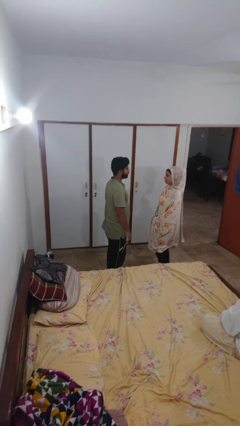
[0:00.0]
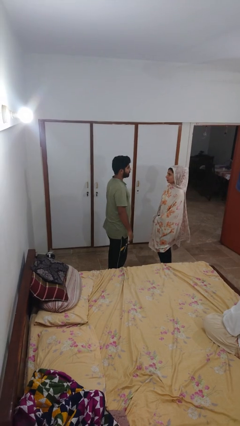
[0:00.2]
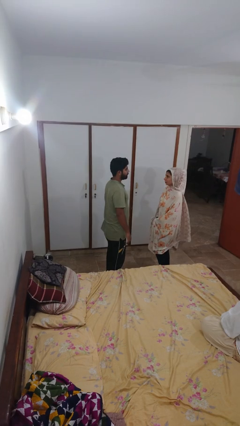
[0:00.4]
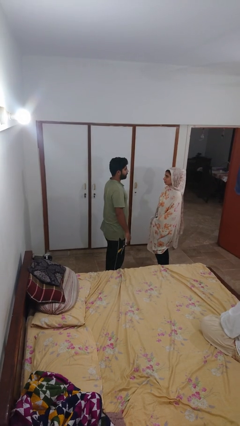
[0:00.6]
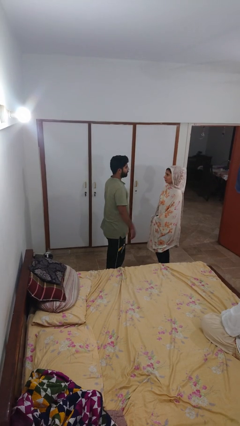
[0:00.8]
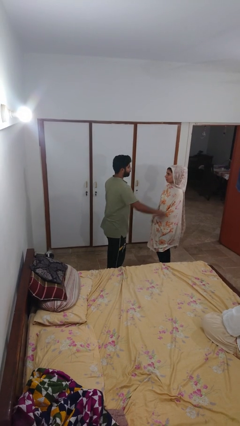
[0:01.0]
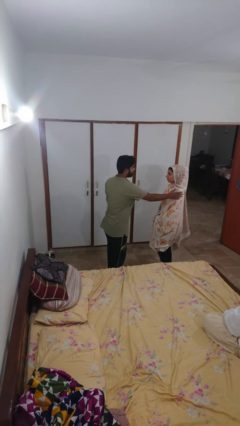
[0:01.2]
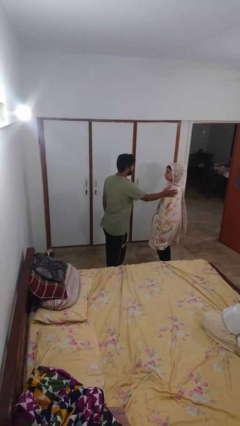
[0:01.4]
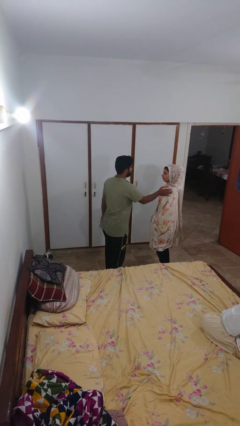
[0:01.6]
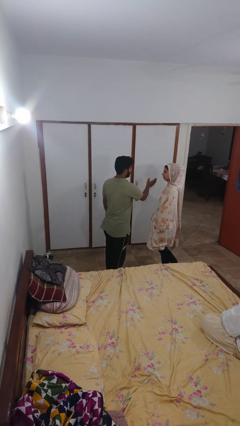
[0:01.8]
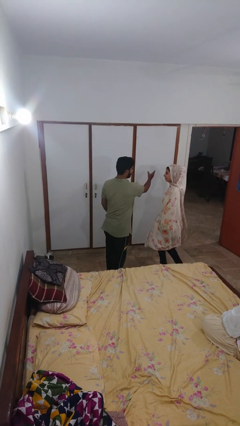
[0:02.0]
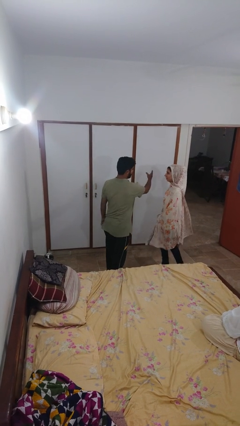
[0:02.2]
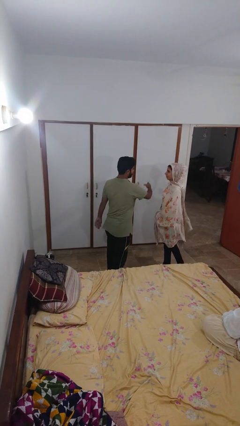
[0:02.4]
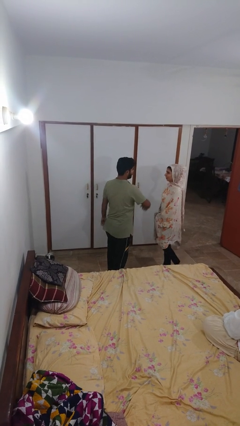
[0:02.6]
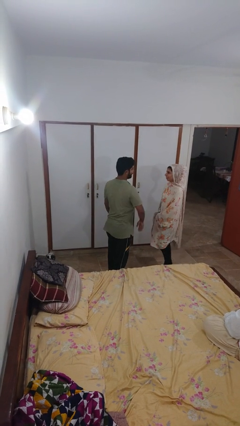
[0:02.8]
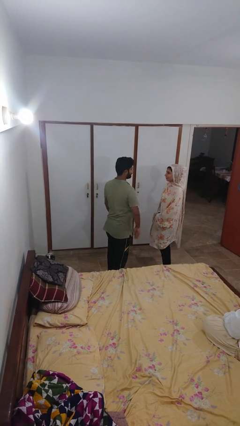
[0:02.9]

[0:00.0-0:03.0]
person shoves person

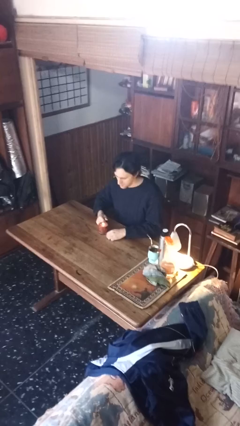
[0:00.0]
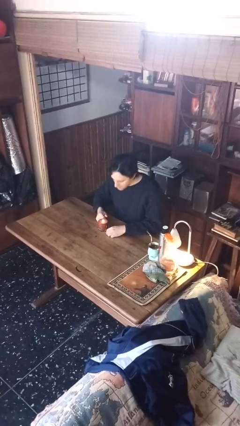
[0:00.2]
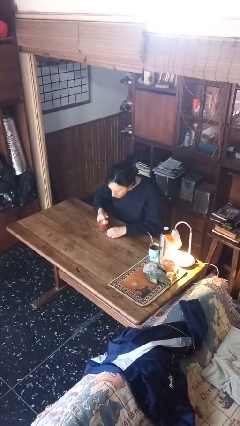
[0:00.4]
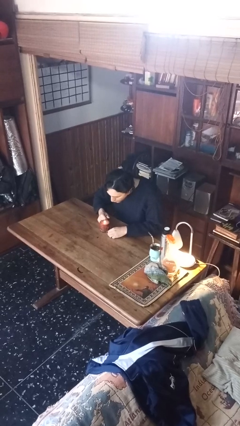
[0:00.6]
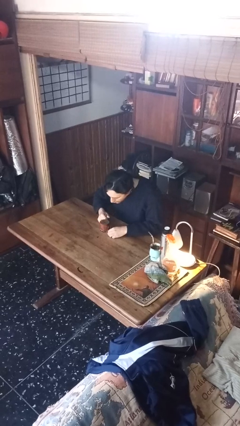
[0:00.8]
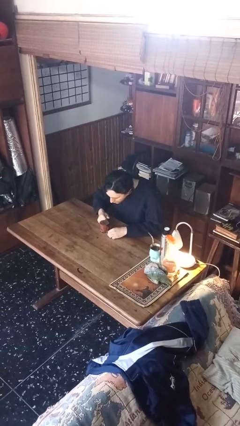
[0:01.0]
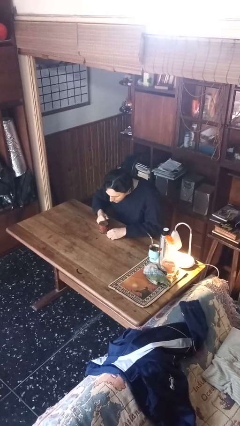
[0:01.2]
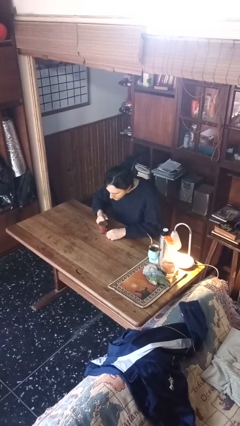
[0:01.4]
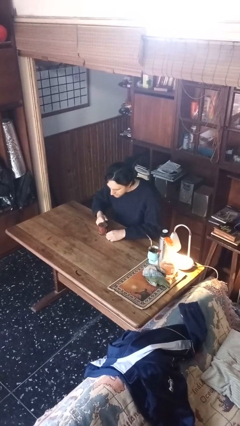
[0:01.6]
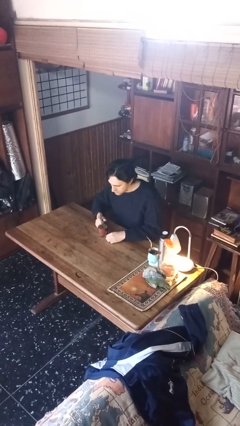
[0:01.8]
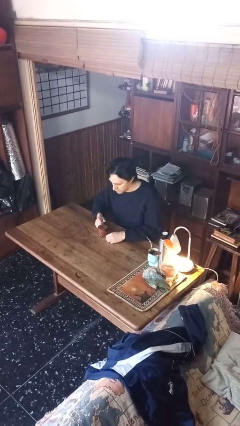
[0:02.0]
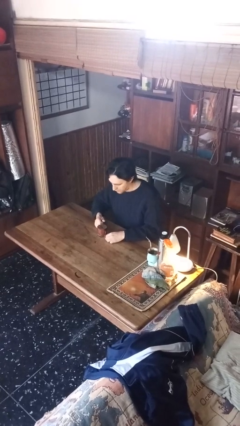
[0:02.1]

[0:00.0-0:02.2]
person extinguishes candle

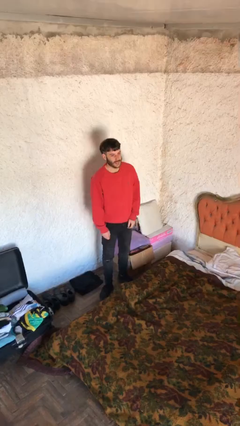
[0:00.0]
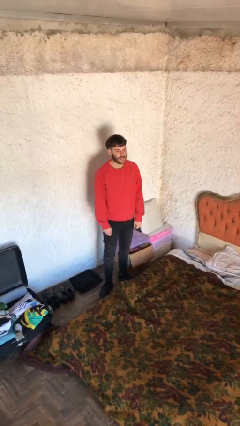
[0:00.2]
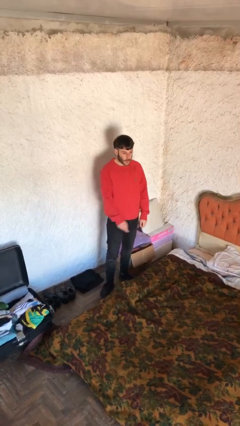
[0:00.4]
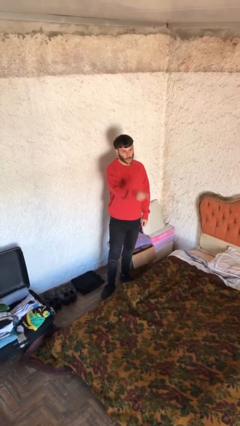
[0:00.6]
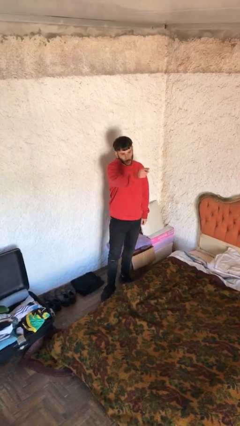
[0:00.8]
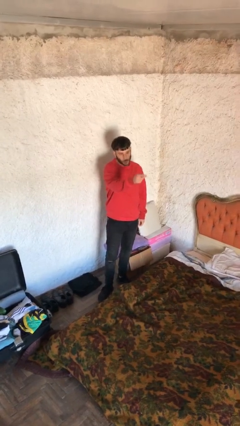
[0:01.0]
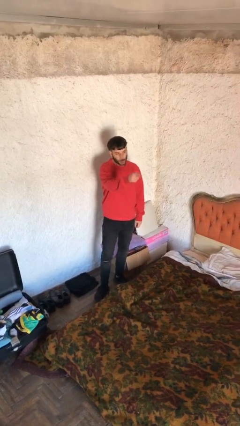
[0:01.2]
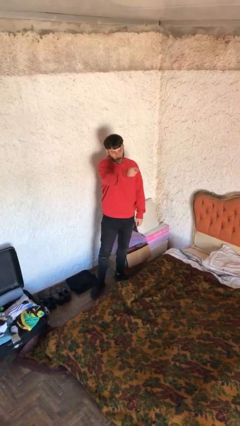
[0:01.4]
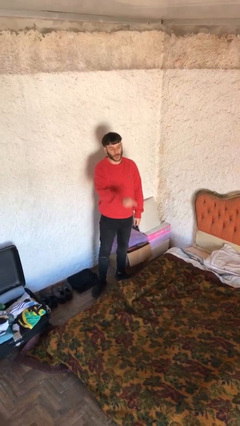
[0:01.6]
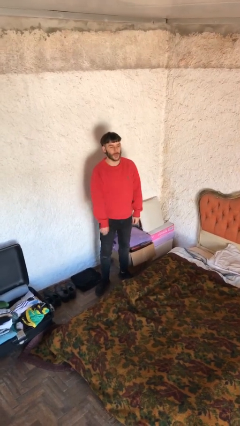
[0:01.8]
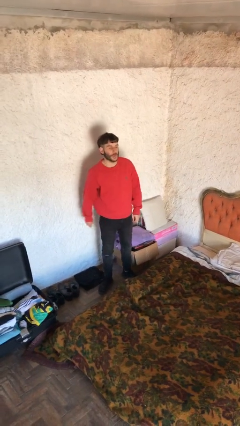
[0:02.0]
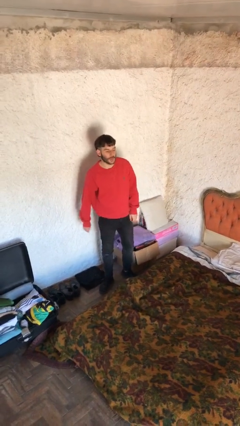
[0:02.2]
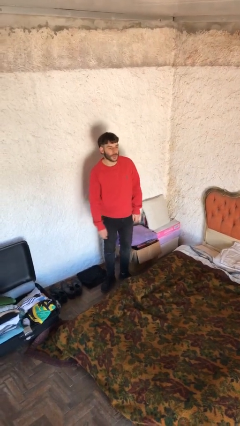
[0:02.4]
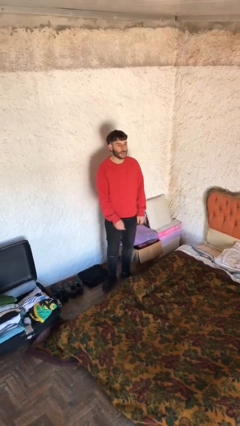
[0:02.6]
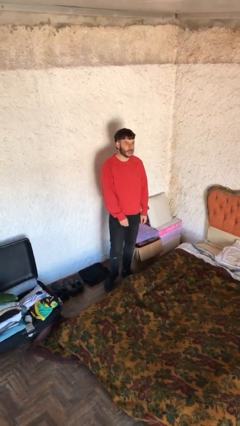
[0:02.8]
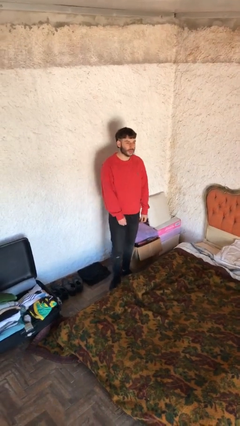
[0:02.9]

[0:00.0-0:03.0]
person points at person

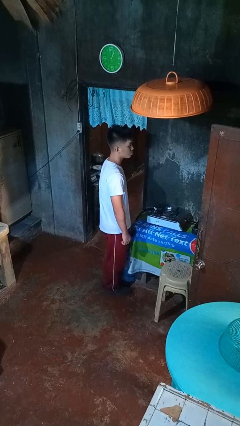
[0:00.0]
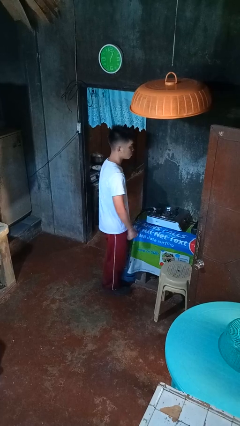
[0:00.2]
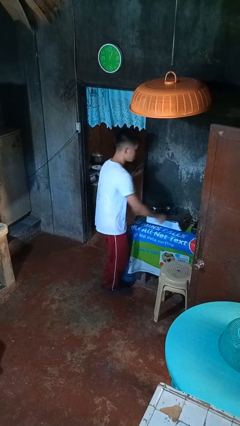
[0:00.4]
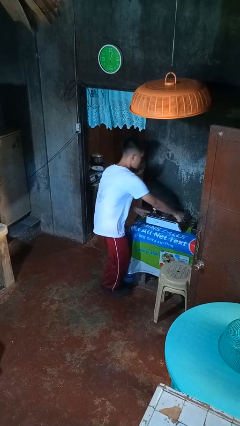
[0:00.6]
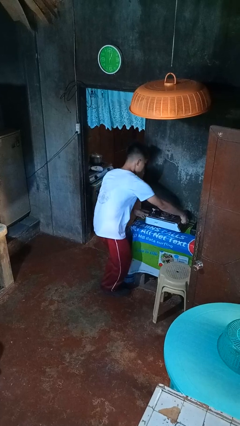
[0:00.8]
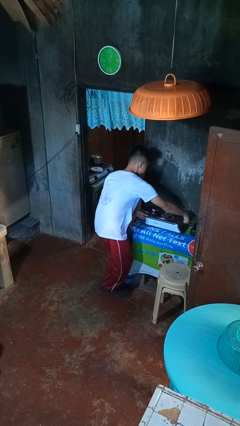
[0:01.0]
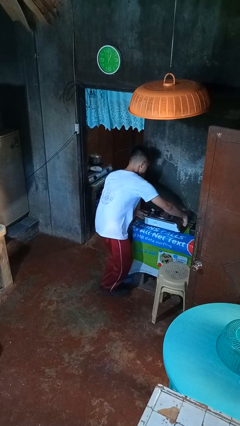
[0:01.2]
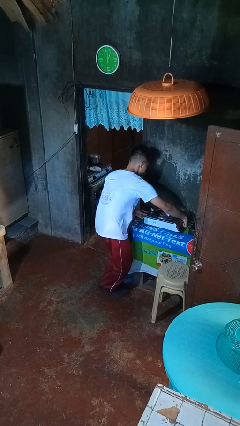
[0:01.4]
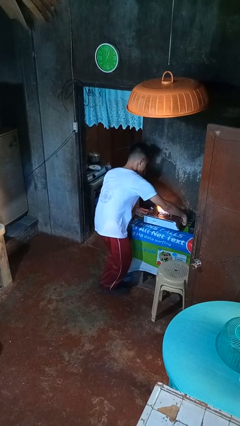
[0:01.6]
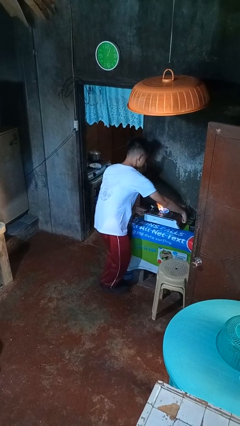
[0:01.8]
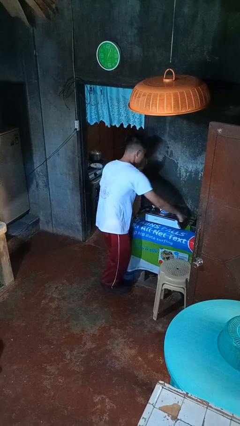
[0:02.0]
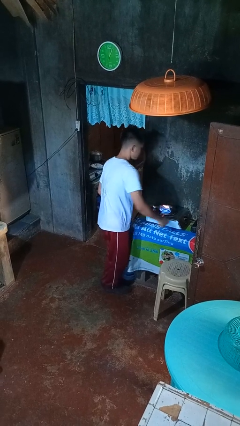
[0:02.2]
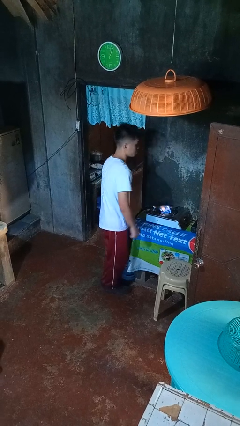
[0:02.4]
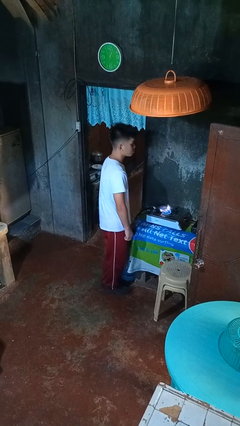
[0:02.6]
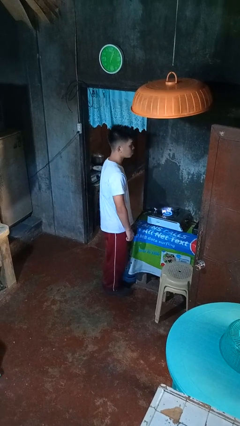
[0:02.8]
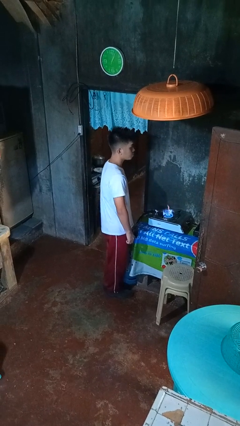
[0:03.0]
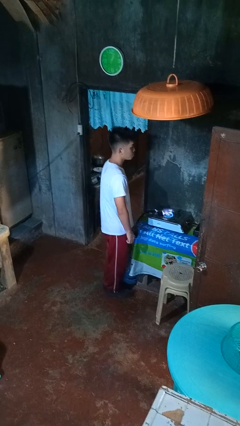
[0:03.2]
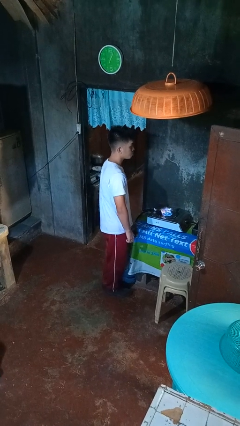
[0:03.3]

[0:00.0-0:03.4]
person turns on stovetop

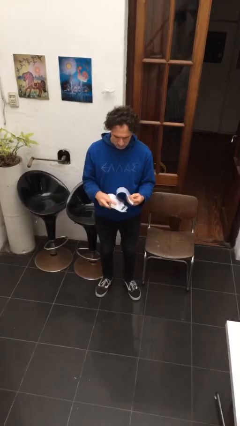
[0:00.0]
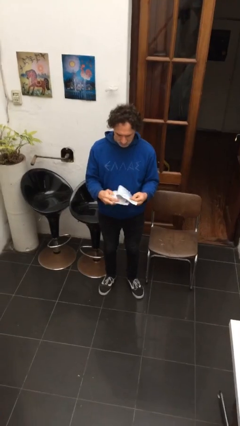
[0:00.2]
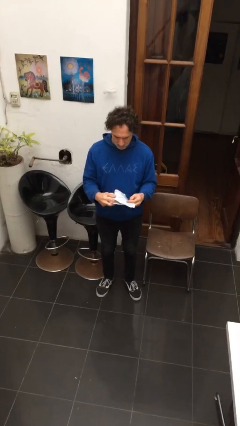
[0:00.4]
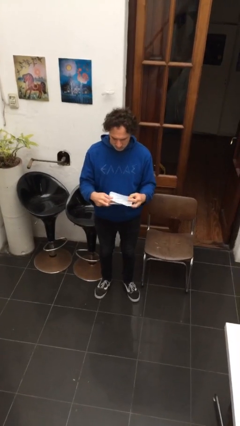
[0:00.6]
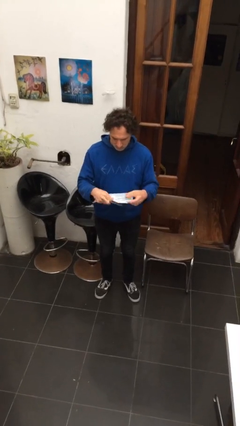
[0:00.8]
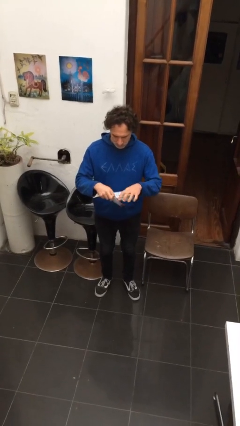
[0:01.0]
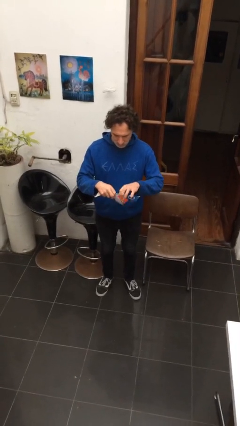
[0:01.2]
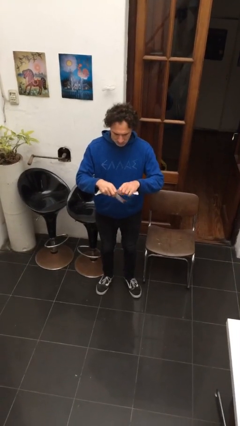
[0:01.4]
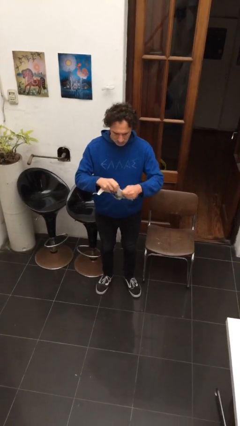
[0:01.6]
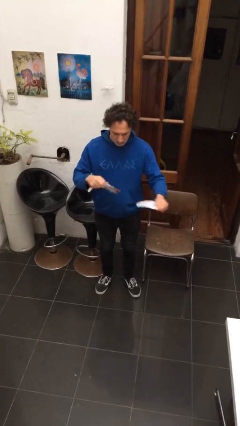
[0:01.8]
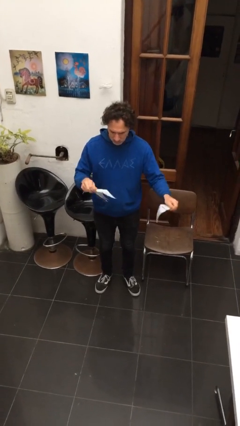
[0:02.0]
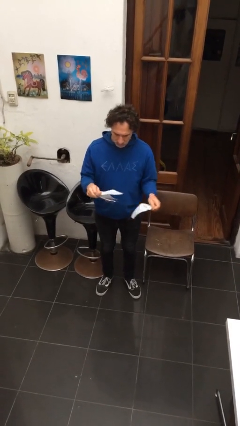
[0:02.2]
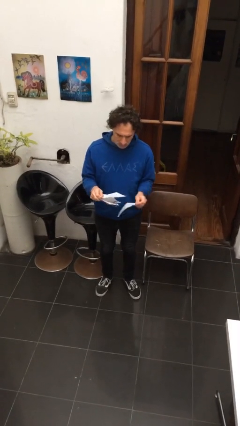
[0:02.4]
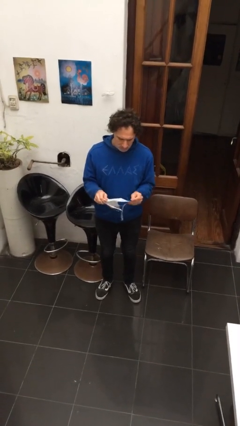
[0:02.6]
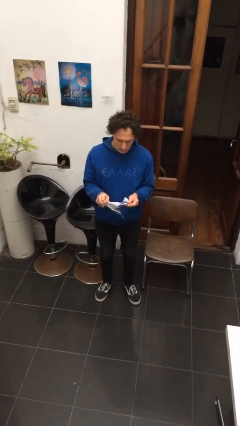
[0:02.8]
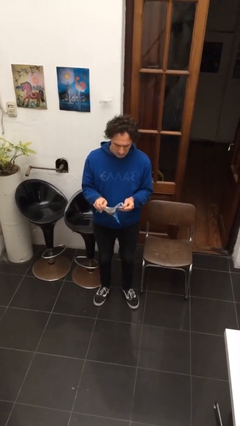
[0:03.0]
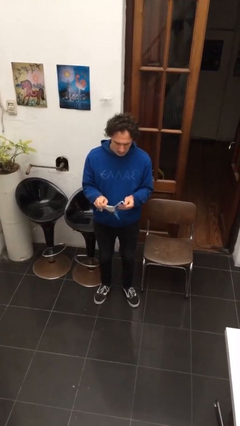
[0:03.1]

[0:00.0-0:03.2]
person tears paper

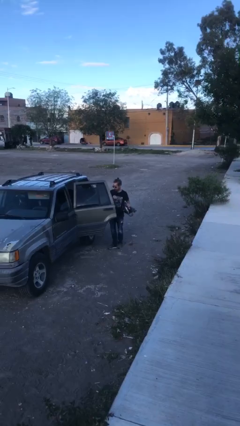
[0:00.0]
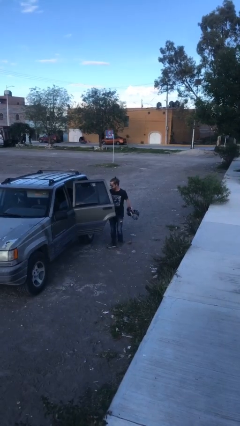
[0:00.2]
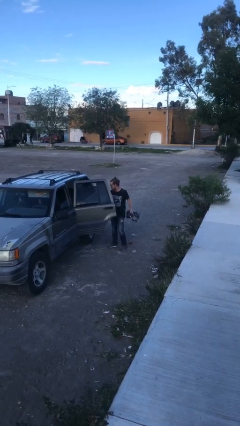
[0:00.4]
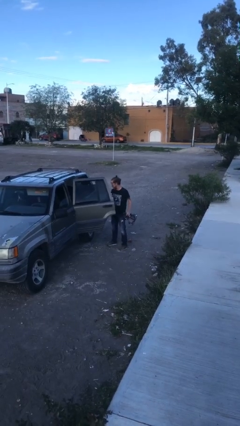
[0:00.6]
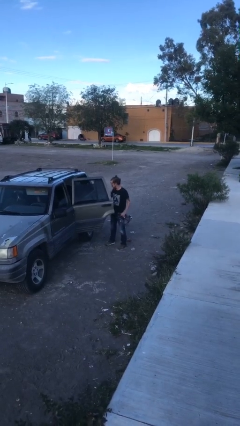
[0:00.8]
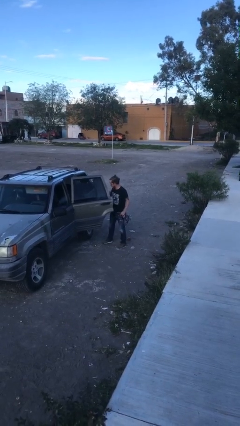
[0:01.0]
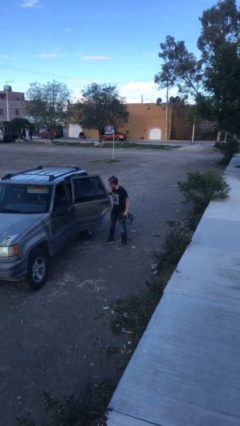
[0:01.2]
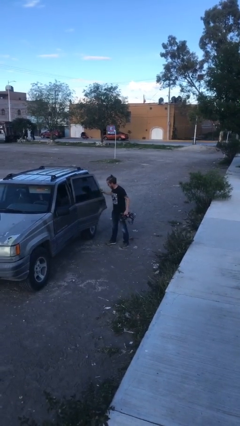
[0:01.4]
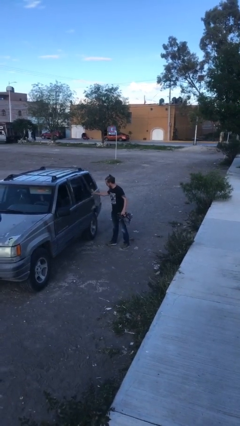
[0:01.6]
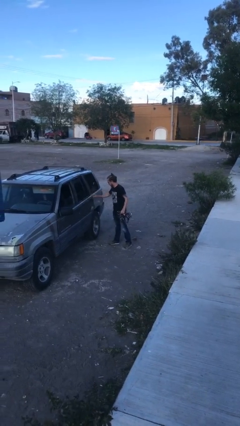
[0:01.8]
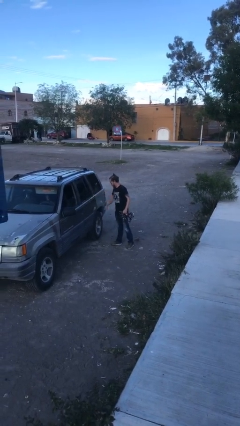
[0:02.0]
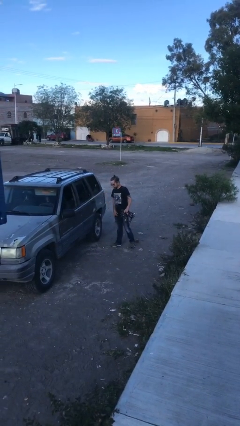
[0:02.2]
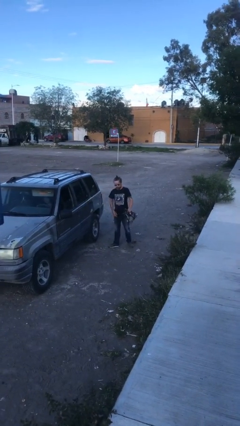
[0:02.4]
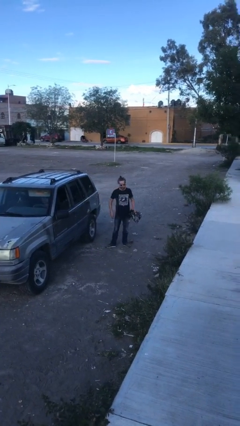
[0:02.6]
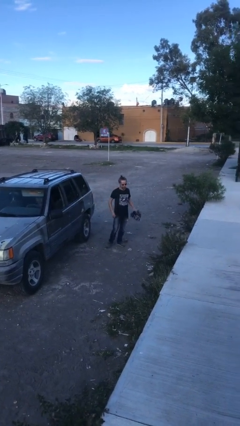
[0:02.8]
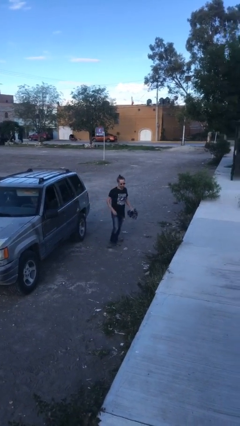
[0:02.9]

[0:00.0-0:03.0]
person closes car door
